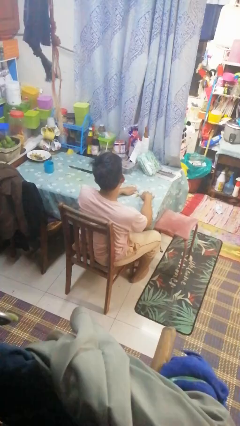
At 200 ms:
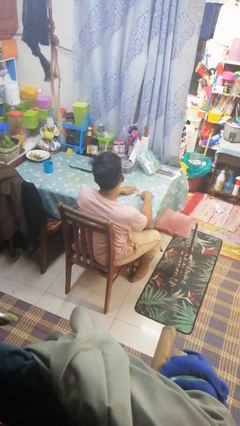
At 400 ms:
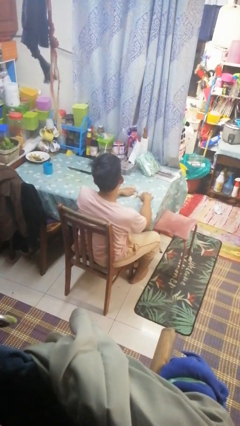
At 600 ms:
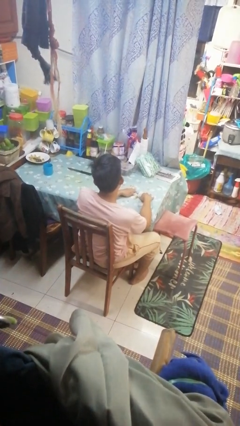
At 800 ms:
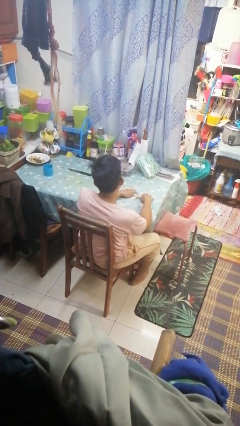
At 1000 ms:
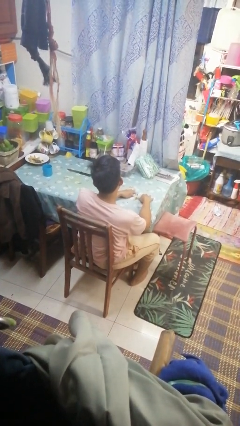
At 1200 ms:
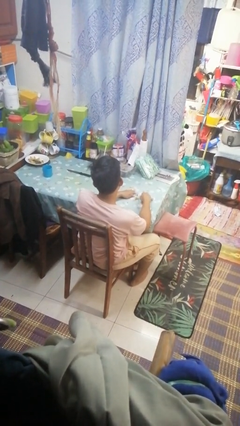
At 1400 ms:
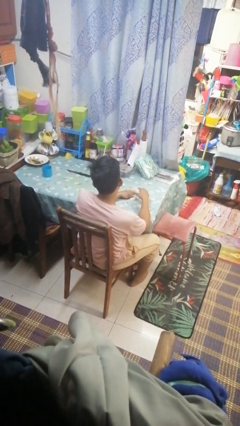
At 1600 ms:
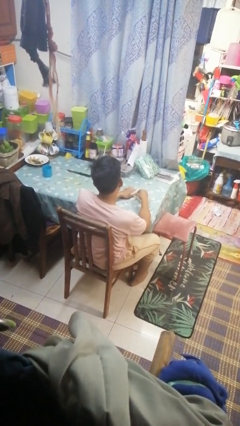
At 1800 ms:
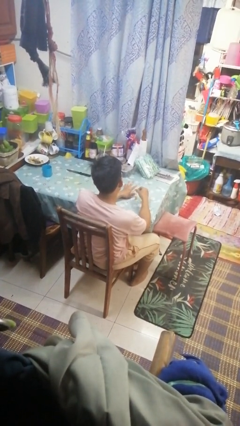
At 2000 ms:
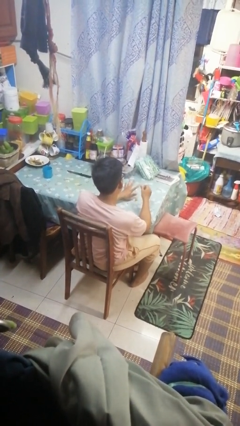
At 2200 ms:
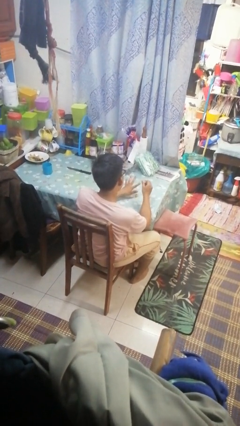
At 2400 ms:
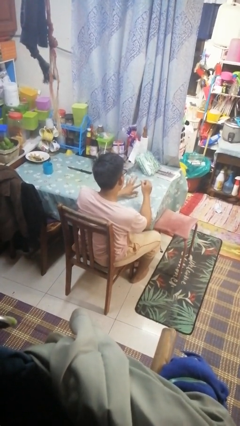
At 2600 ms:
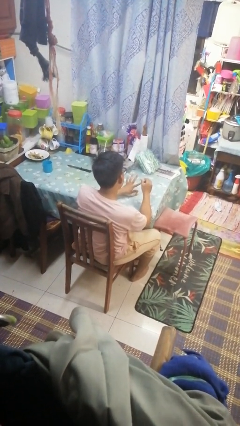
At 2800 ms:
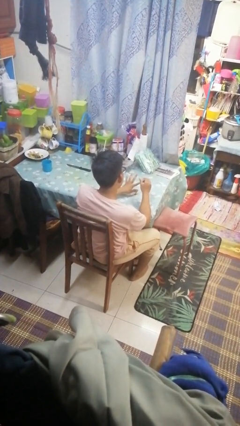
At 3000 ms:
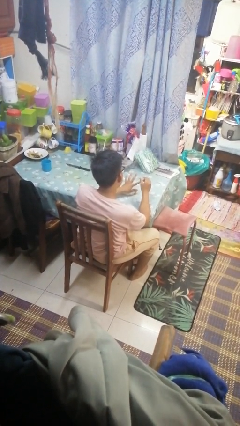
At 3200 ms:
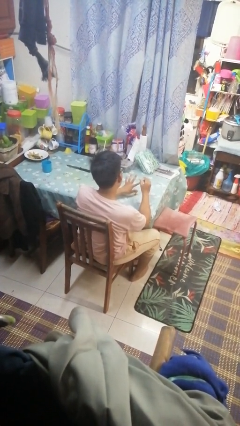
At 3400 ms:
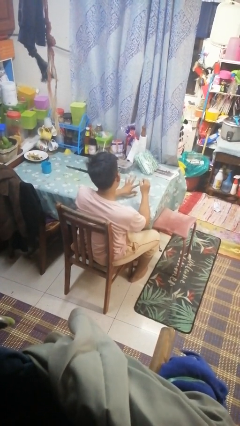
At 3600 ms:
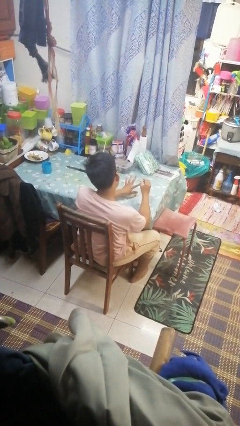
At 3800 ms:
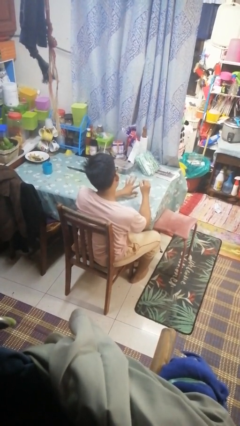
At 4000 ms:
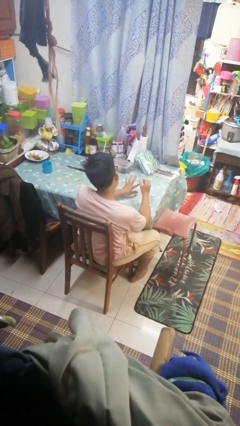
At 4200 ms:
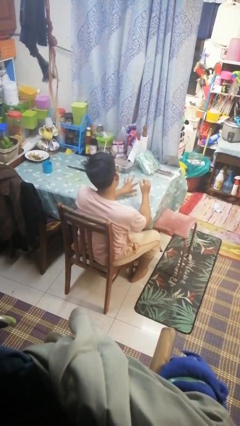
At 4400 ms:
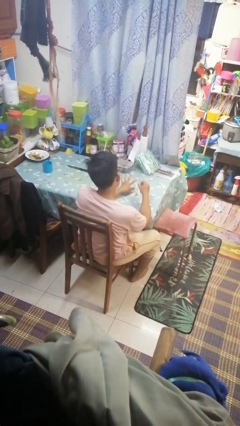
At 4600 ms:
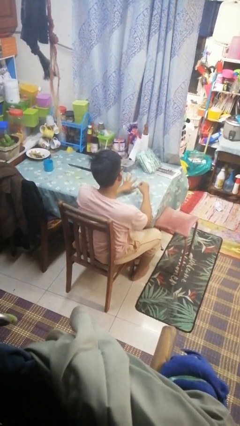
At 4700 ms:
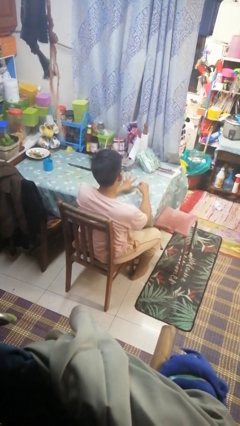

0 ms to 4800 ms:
person paints fingernails

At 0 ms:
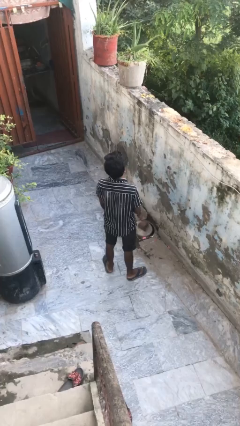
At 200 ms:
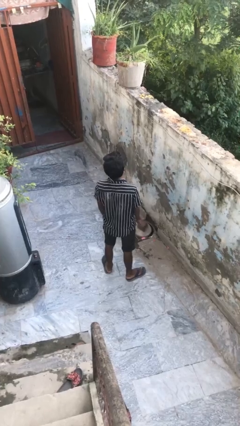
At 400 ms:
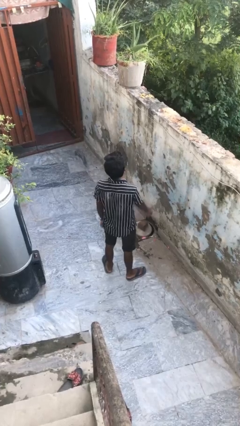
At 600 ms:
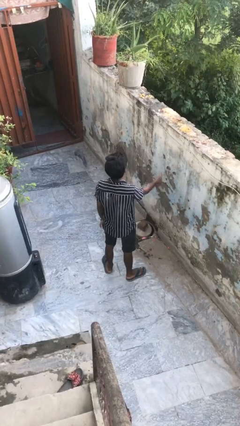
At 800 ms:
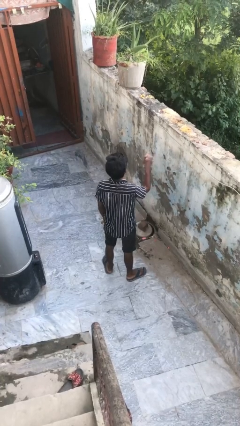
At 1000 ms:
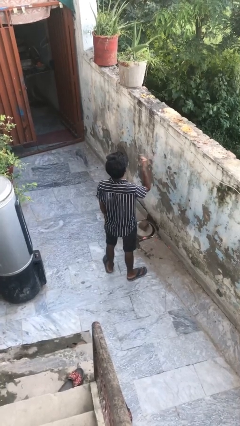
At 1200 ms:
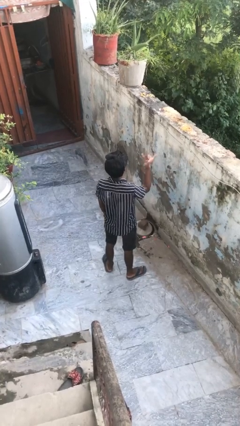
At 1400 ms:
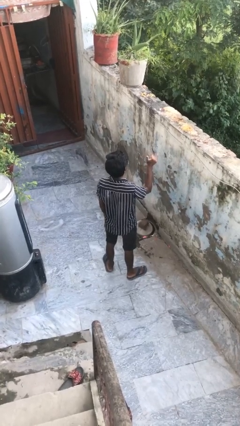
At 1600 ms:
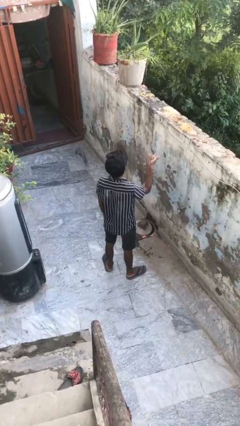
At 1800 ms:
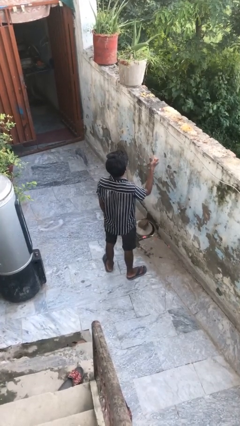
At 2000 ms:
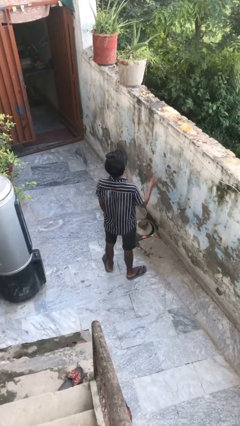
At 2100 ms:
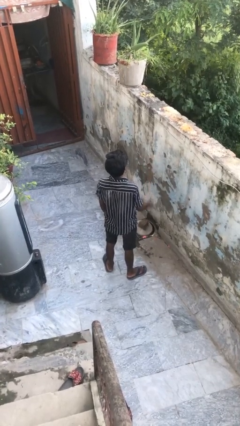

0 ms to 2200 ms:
person gestures hang loose

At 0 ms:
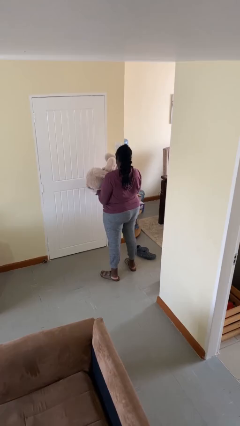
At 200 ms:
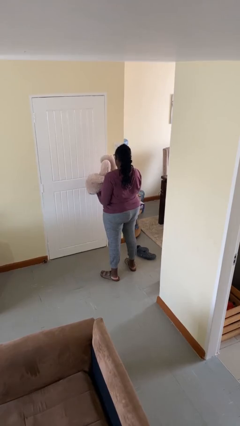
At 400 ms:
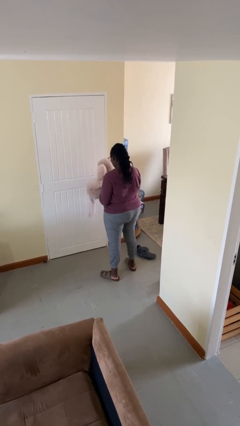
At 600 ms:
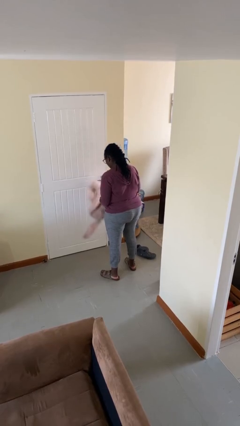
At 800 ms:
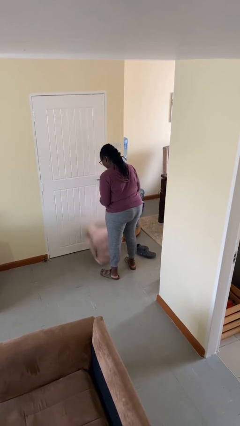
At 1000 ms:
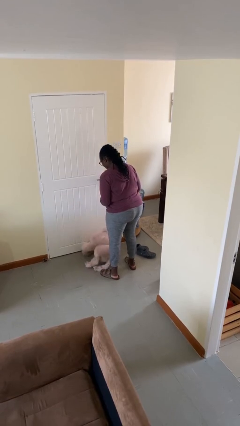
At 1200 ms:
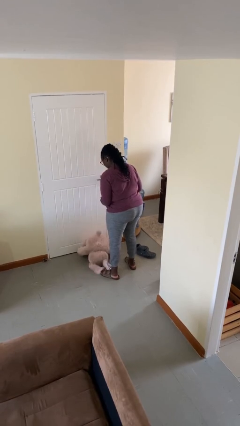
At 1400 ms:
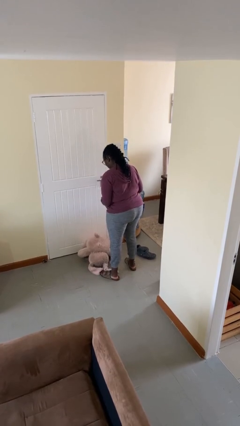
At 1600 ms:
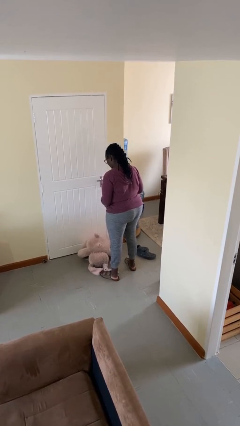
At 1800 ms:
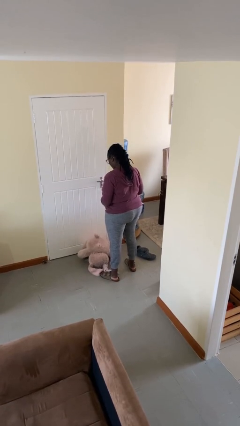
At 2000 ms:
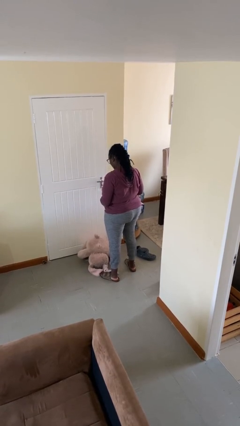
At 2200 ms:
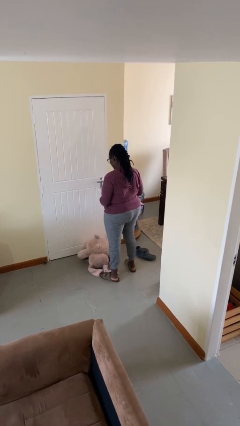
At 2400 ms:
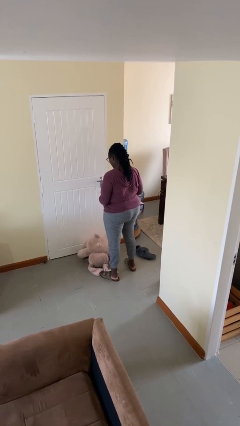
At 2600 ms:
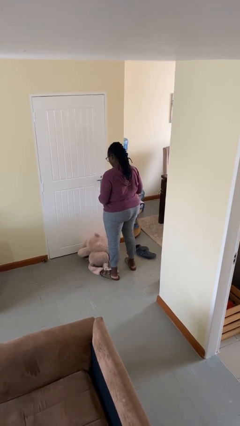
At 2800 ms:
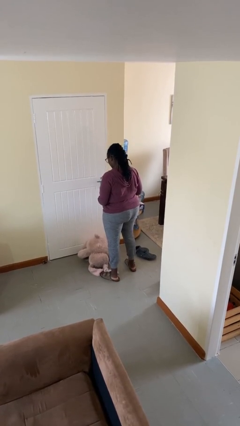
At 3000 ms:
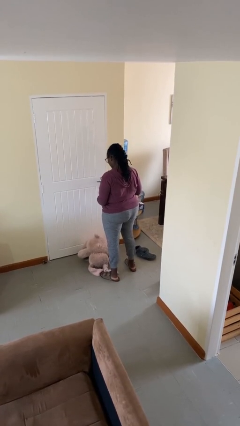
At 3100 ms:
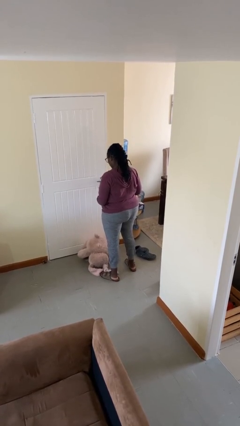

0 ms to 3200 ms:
person drops object

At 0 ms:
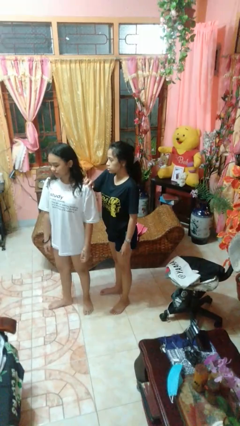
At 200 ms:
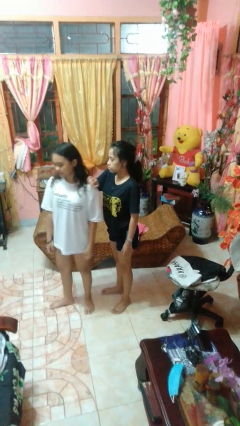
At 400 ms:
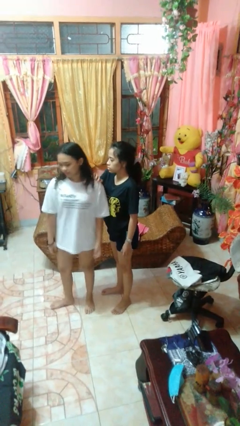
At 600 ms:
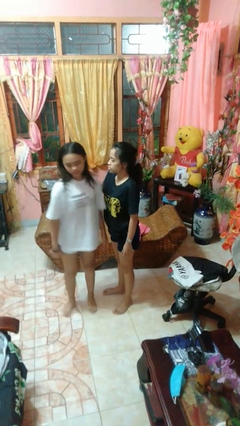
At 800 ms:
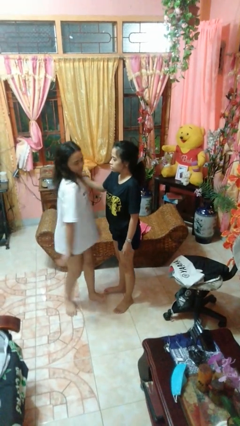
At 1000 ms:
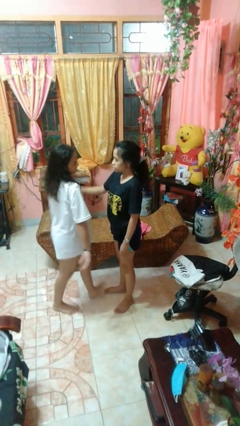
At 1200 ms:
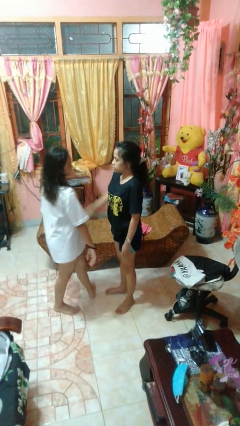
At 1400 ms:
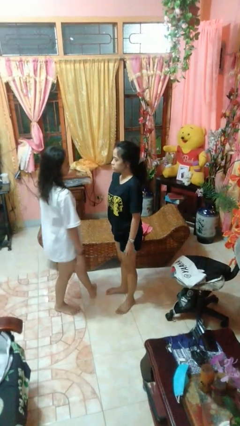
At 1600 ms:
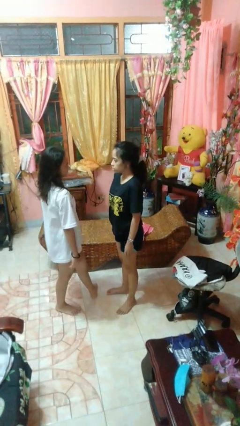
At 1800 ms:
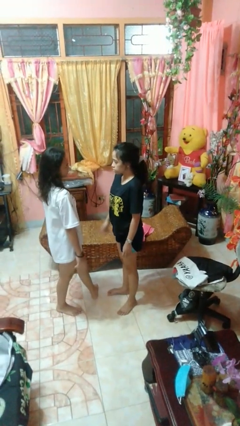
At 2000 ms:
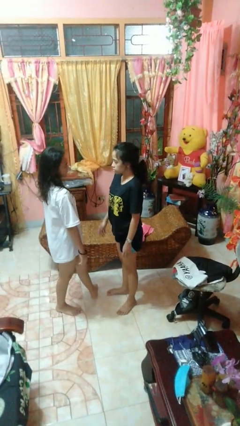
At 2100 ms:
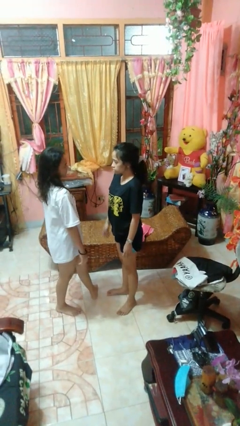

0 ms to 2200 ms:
person spins person around

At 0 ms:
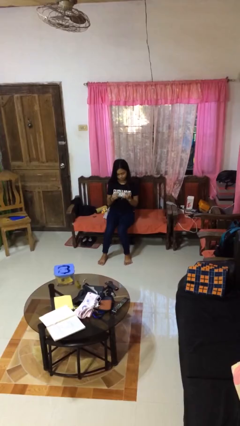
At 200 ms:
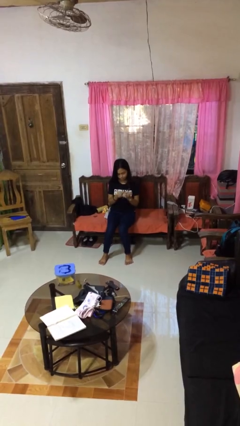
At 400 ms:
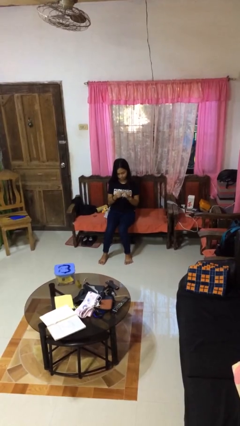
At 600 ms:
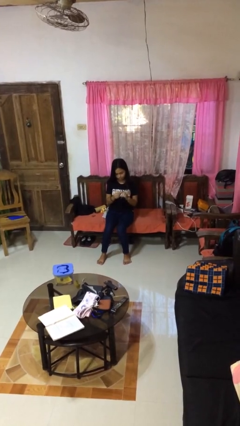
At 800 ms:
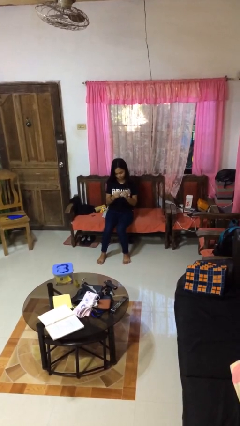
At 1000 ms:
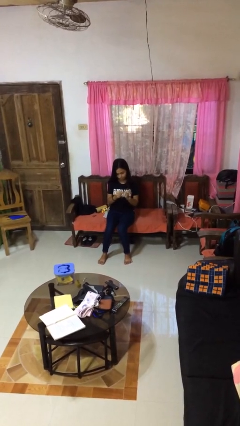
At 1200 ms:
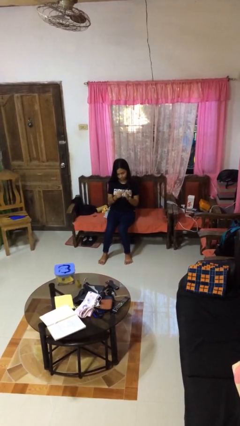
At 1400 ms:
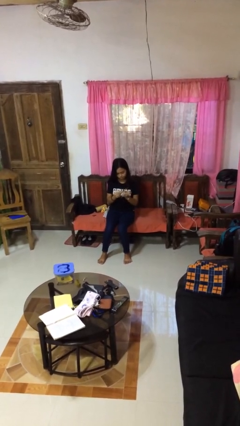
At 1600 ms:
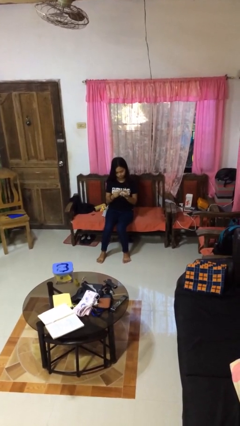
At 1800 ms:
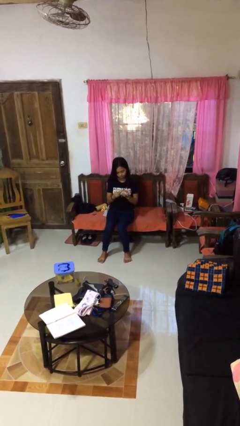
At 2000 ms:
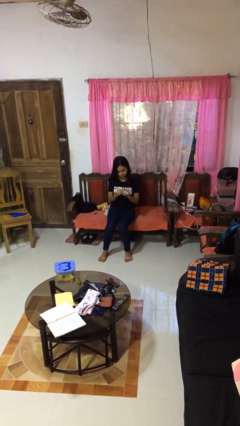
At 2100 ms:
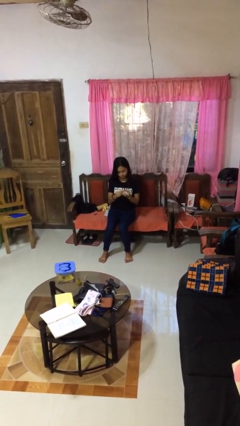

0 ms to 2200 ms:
person files fingernails

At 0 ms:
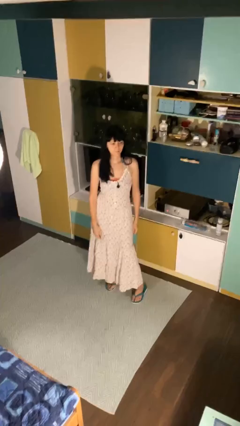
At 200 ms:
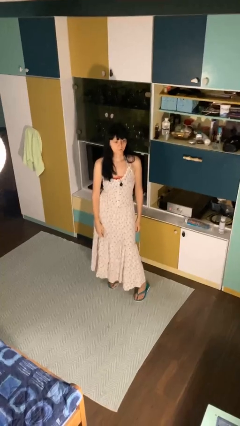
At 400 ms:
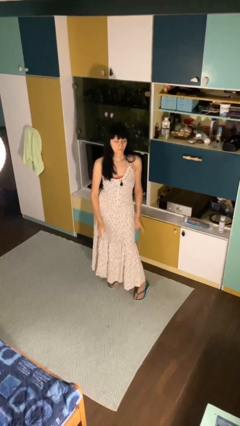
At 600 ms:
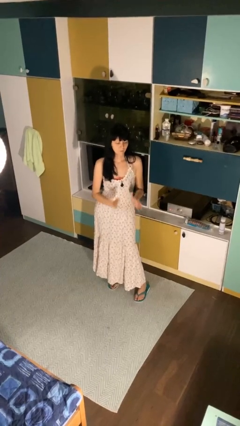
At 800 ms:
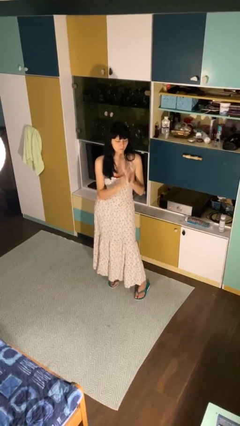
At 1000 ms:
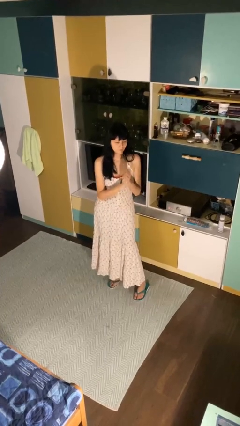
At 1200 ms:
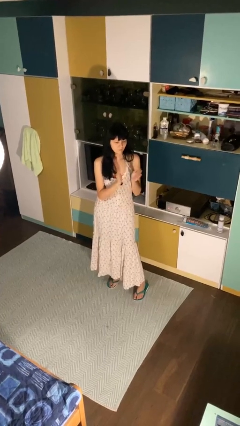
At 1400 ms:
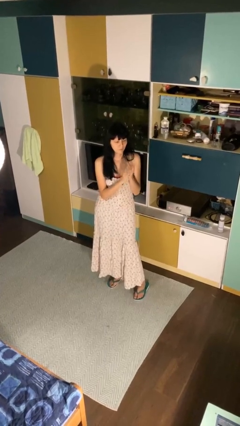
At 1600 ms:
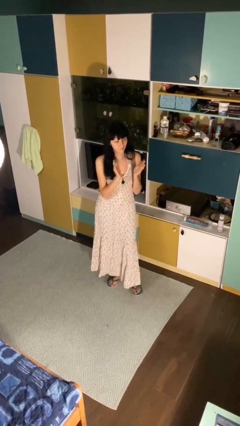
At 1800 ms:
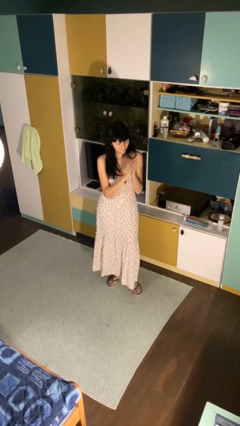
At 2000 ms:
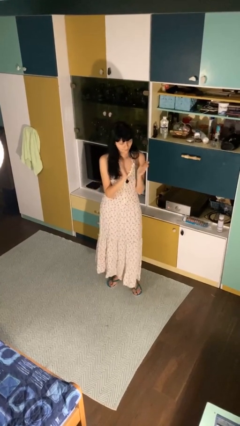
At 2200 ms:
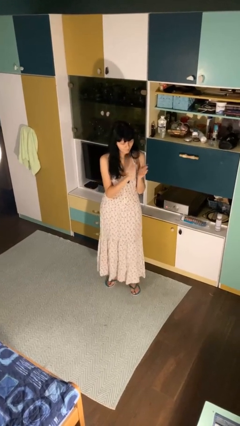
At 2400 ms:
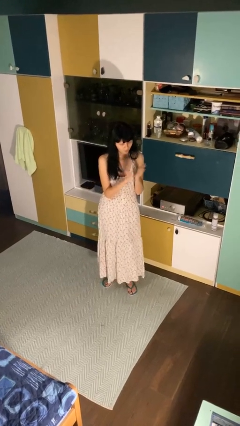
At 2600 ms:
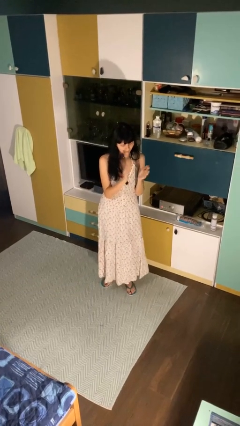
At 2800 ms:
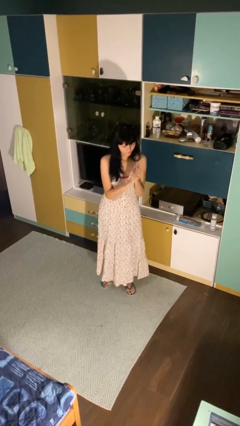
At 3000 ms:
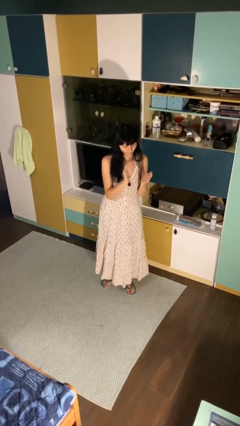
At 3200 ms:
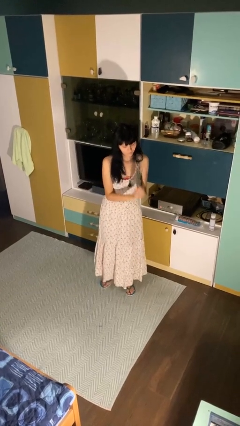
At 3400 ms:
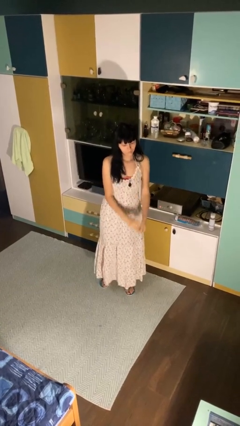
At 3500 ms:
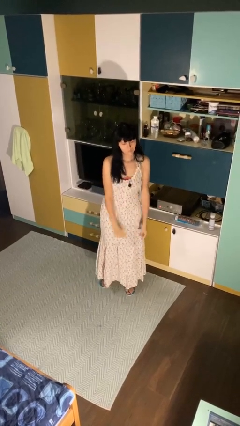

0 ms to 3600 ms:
person claps hands
